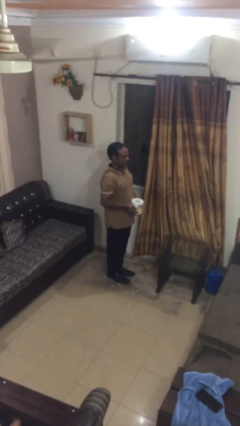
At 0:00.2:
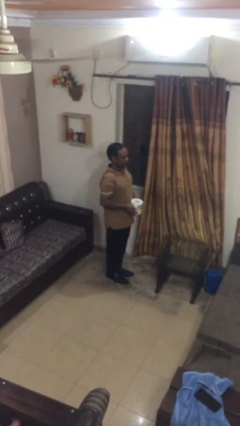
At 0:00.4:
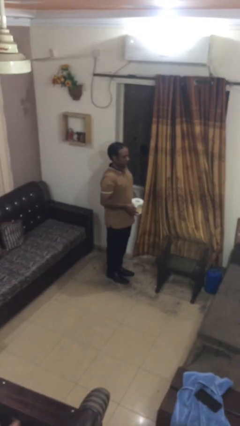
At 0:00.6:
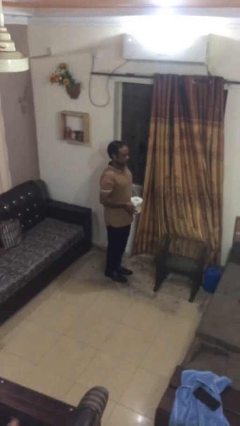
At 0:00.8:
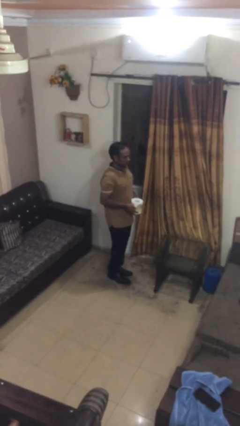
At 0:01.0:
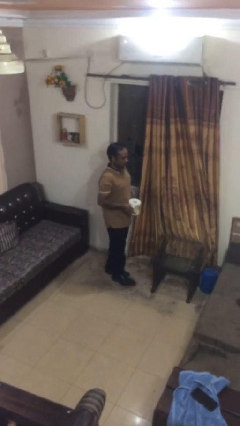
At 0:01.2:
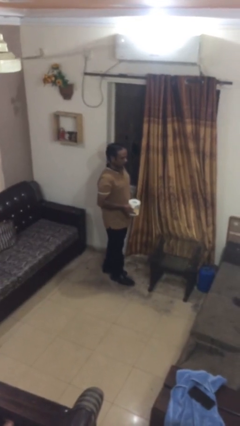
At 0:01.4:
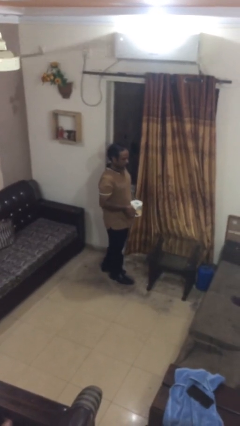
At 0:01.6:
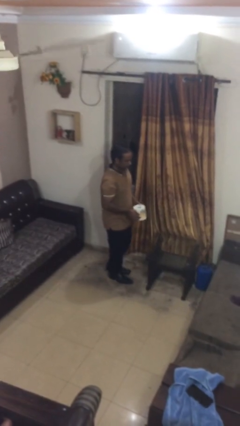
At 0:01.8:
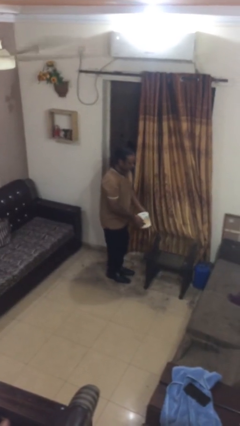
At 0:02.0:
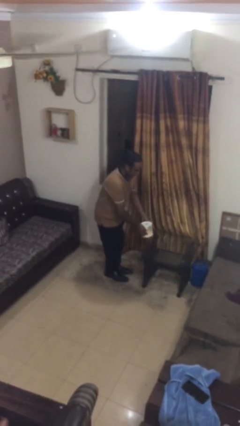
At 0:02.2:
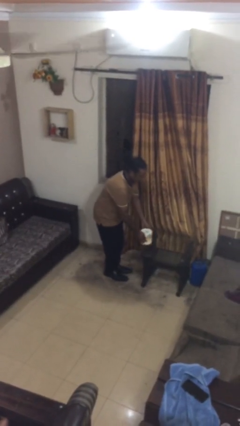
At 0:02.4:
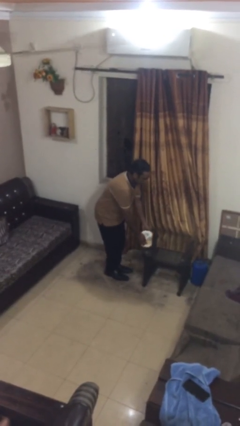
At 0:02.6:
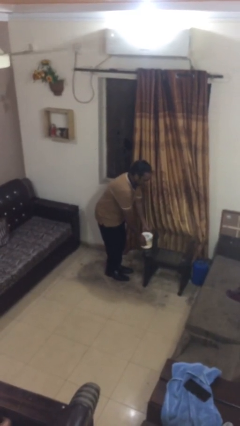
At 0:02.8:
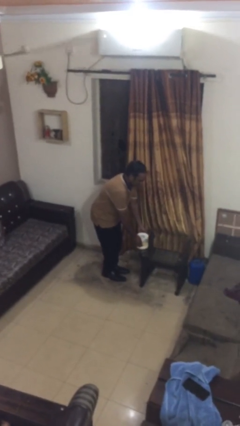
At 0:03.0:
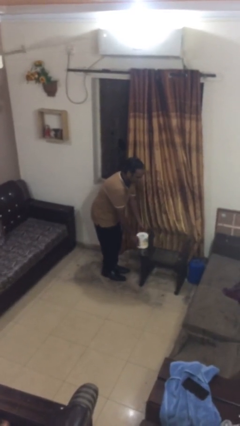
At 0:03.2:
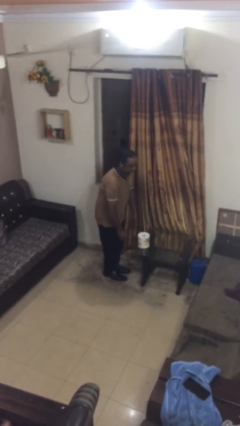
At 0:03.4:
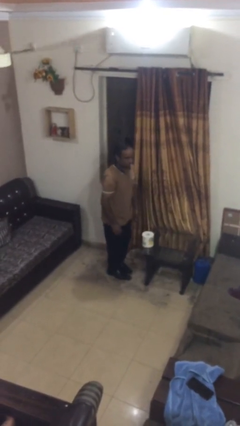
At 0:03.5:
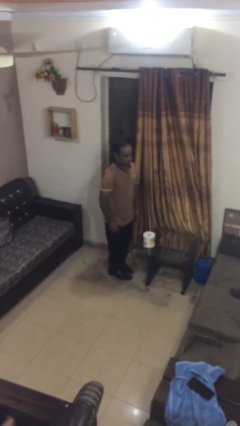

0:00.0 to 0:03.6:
person puts down object on table

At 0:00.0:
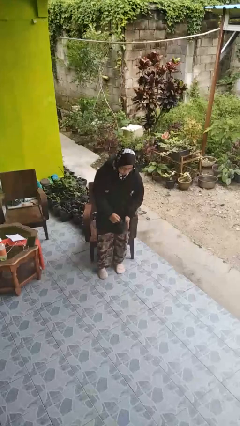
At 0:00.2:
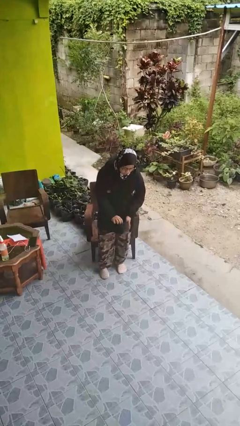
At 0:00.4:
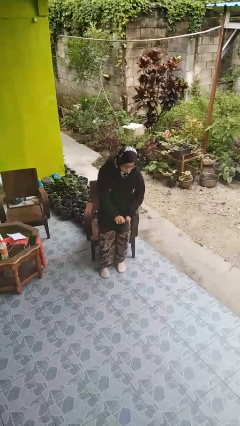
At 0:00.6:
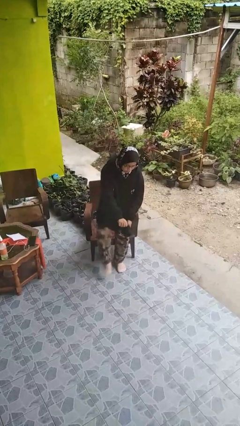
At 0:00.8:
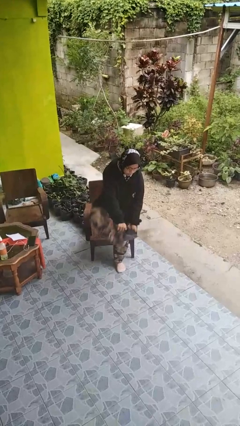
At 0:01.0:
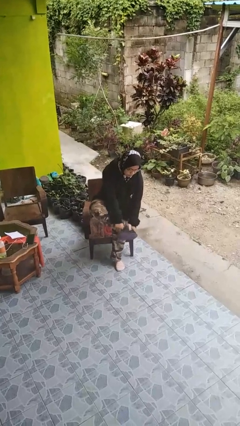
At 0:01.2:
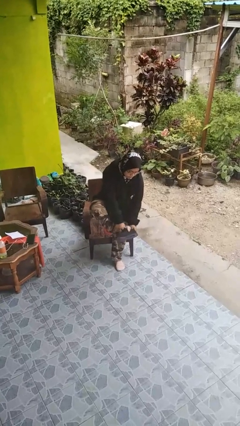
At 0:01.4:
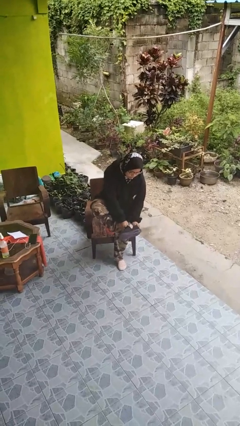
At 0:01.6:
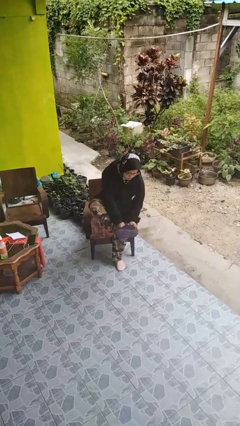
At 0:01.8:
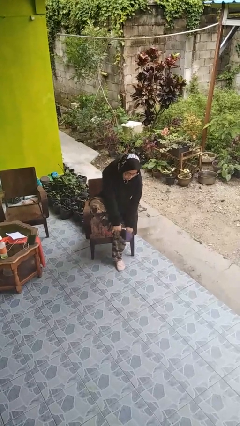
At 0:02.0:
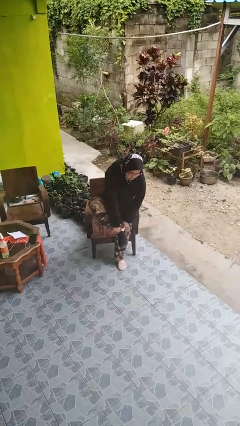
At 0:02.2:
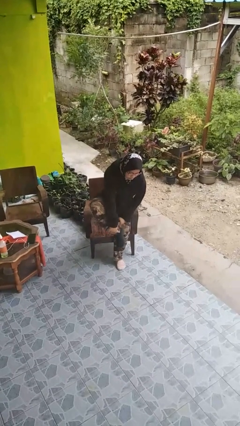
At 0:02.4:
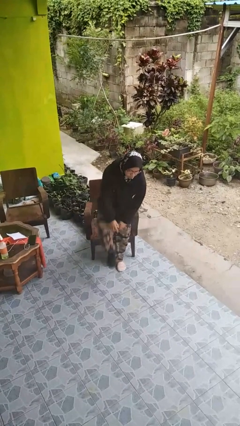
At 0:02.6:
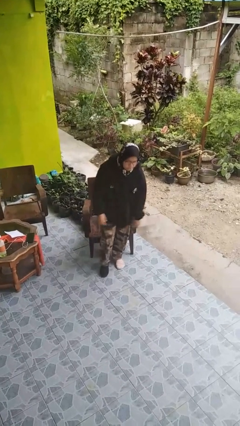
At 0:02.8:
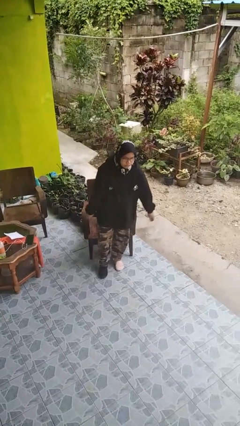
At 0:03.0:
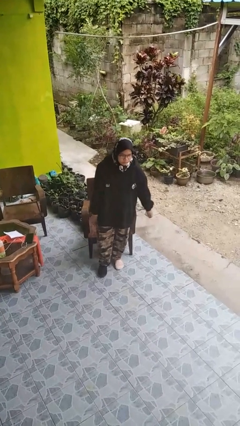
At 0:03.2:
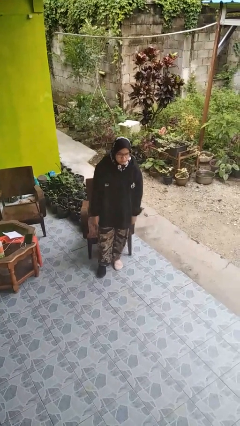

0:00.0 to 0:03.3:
person puts on shoes

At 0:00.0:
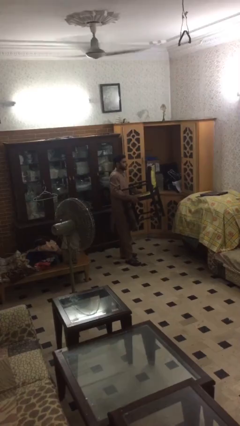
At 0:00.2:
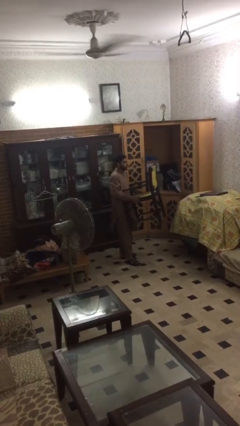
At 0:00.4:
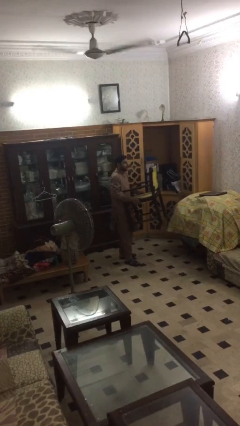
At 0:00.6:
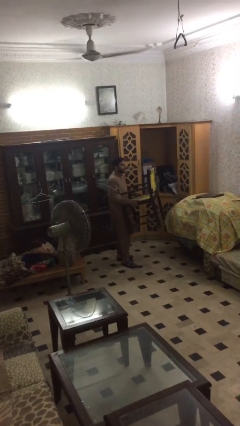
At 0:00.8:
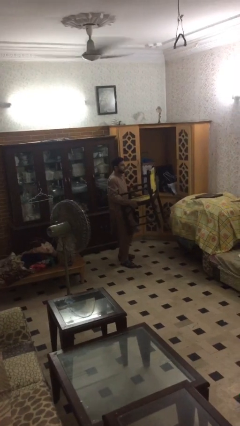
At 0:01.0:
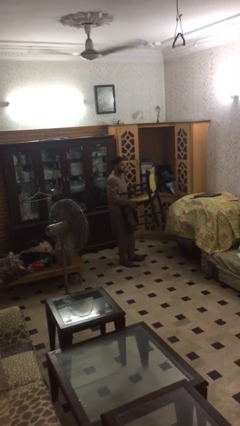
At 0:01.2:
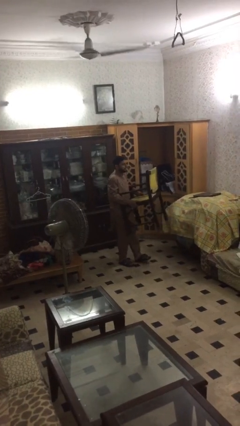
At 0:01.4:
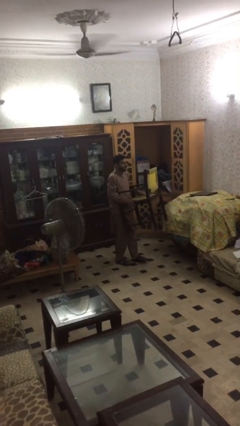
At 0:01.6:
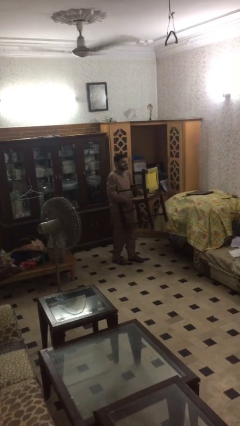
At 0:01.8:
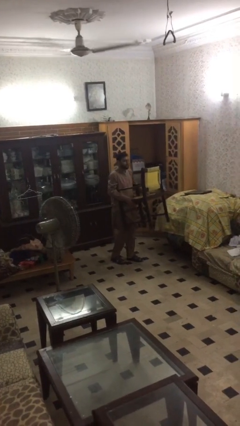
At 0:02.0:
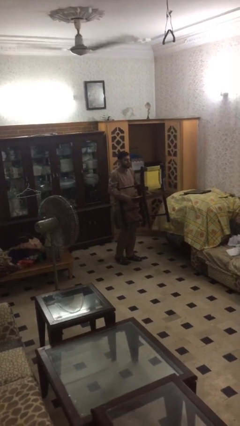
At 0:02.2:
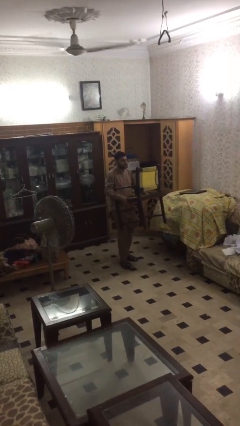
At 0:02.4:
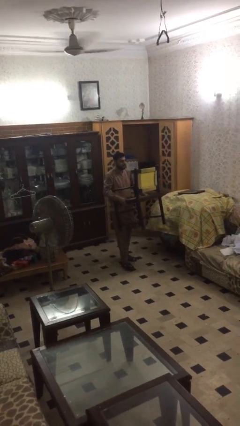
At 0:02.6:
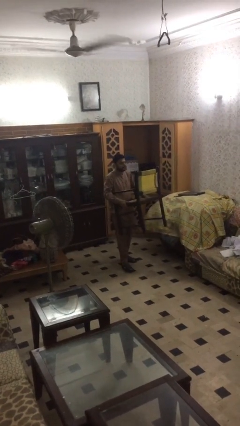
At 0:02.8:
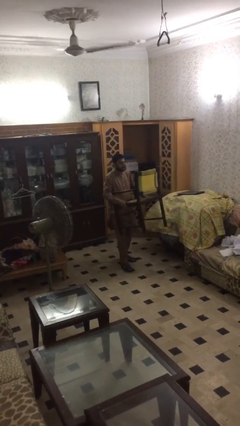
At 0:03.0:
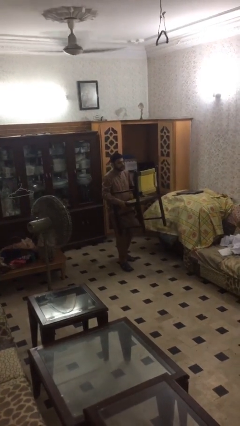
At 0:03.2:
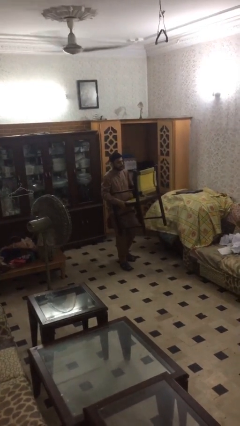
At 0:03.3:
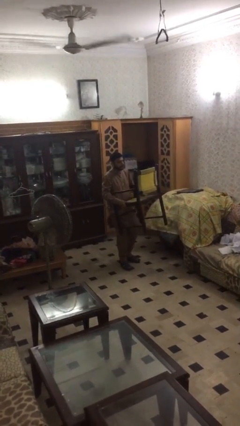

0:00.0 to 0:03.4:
person puts down object on floor

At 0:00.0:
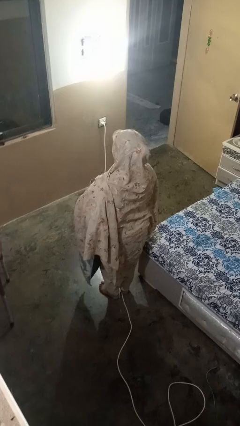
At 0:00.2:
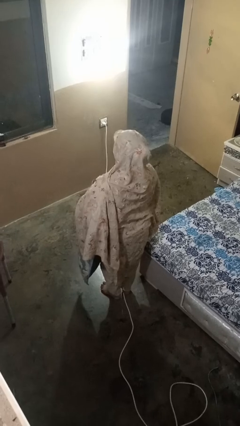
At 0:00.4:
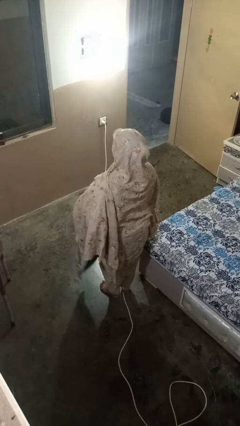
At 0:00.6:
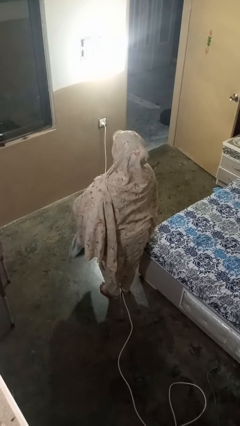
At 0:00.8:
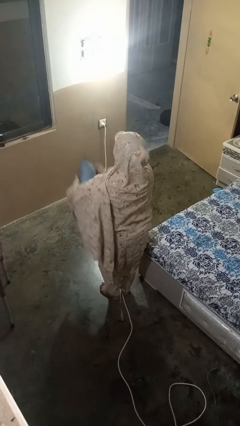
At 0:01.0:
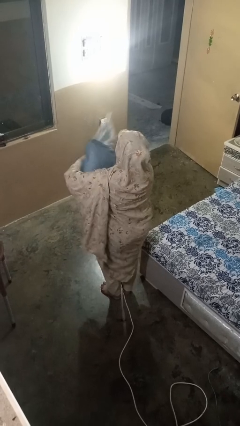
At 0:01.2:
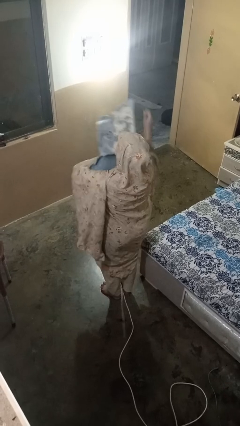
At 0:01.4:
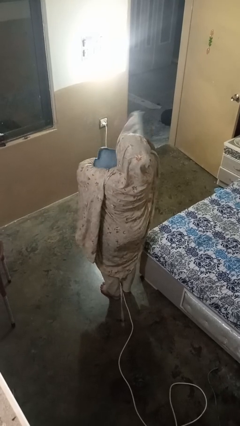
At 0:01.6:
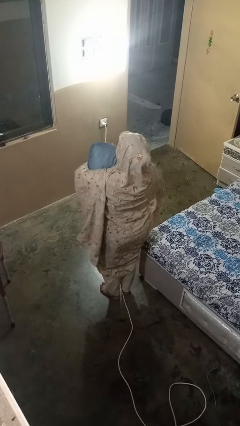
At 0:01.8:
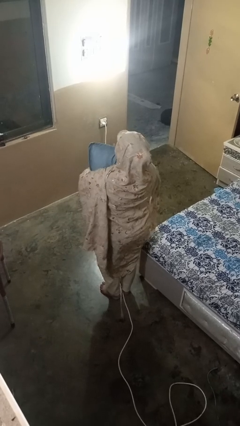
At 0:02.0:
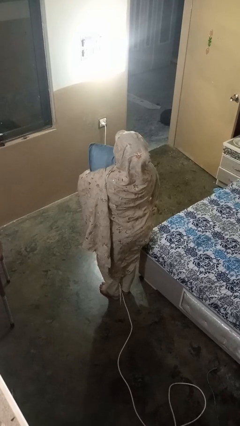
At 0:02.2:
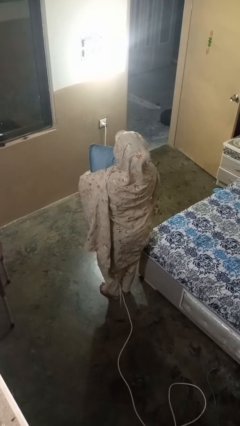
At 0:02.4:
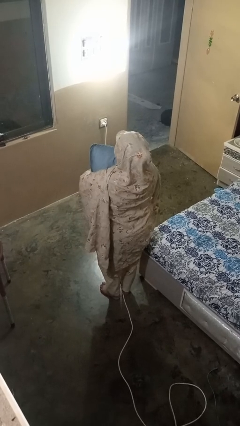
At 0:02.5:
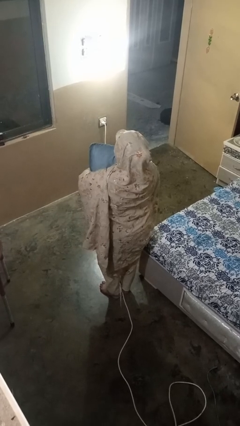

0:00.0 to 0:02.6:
person squeezes object

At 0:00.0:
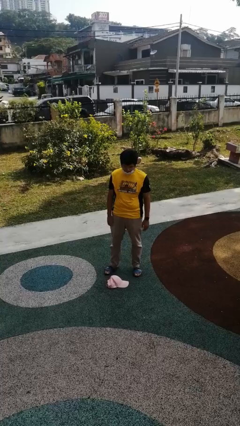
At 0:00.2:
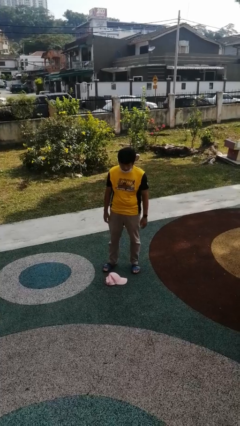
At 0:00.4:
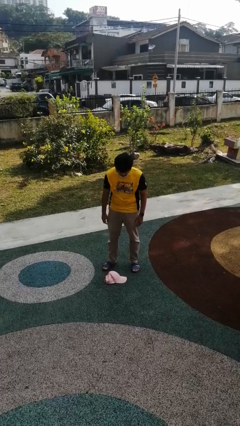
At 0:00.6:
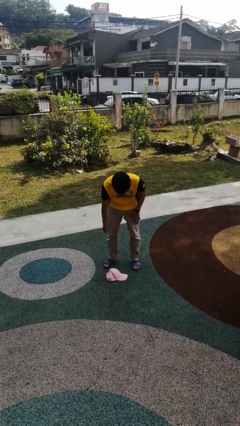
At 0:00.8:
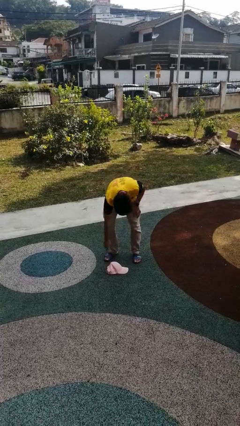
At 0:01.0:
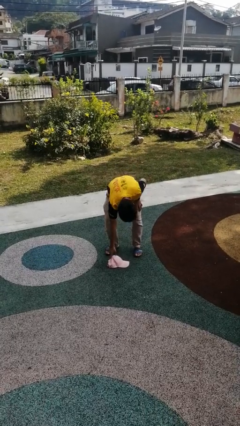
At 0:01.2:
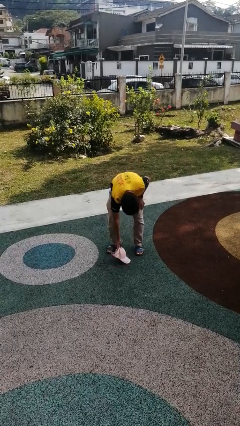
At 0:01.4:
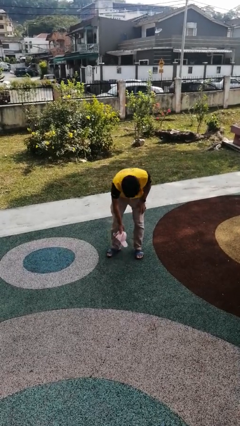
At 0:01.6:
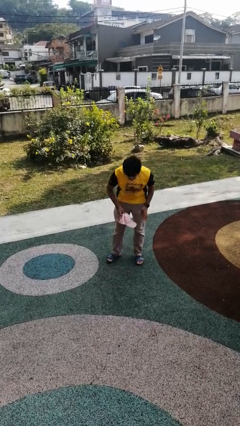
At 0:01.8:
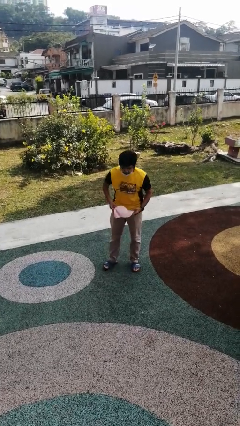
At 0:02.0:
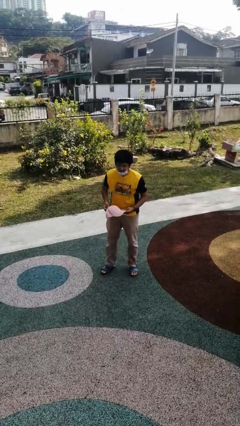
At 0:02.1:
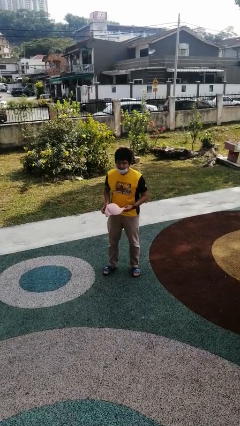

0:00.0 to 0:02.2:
person picks up object from floor

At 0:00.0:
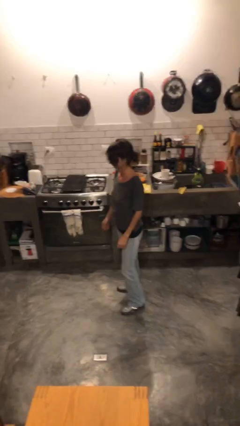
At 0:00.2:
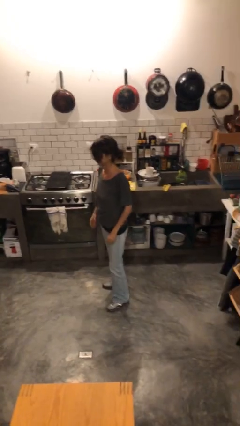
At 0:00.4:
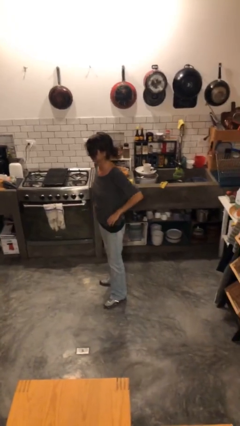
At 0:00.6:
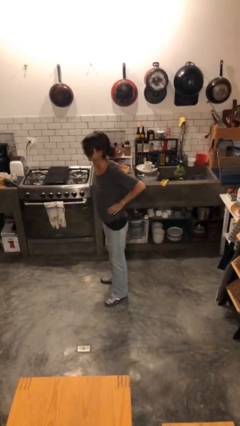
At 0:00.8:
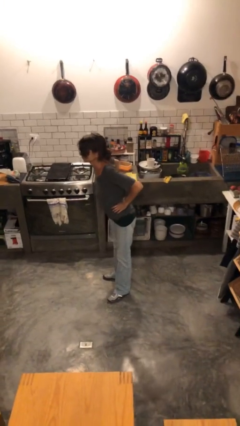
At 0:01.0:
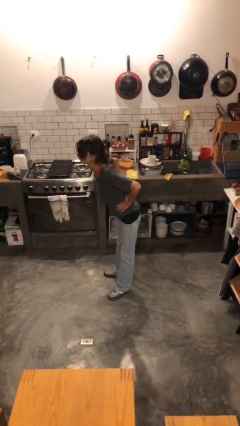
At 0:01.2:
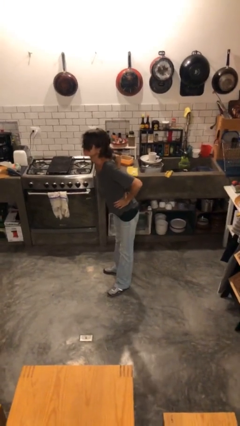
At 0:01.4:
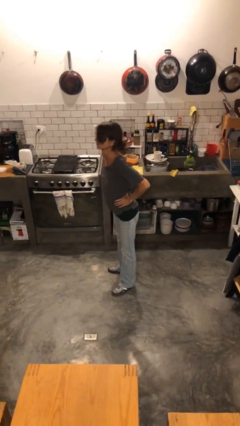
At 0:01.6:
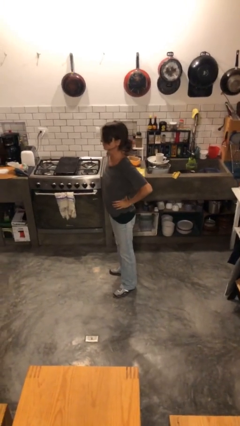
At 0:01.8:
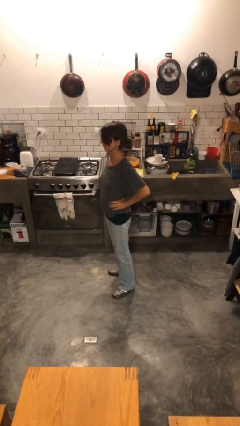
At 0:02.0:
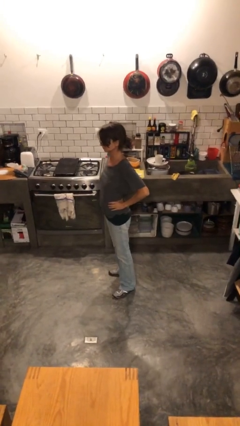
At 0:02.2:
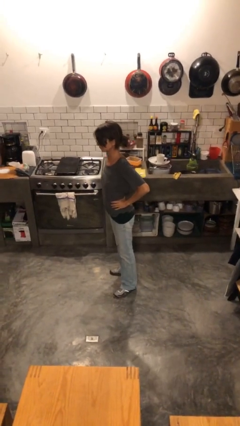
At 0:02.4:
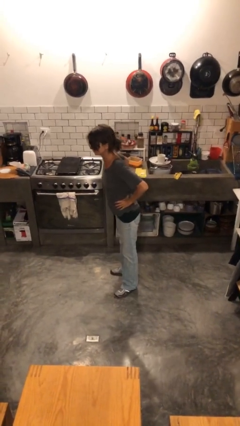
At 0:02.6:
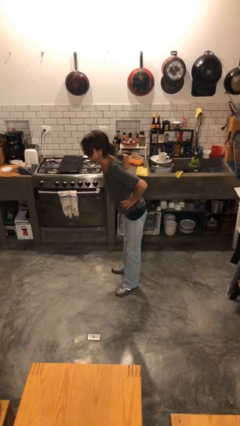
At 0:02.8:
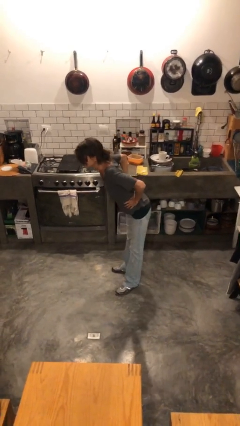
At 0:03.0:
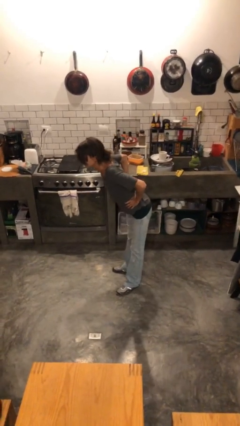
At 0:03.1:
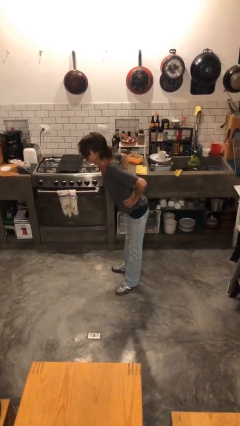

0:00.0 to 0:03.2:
person stretches back
